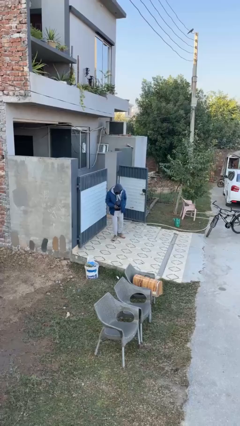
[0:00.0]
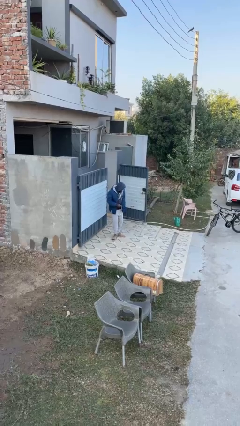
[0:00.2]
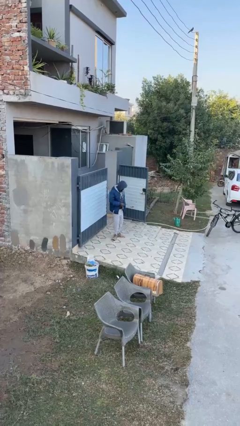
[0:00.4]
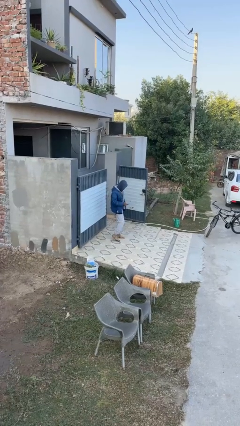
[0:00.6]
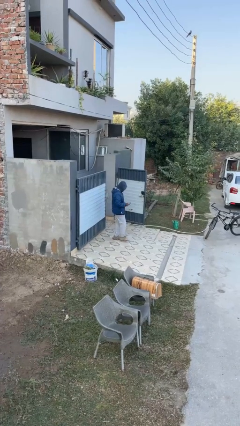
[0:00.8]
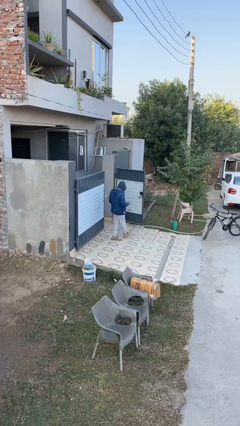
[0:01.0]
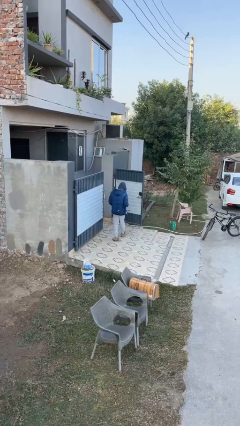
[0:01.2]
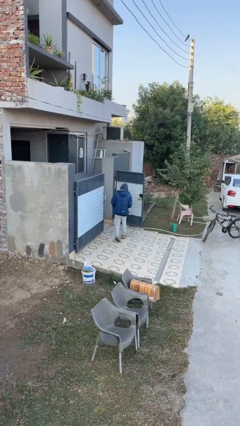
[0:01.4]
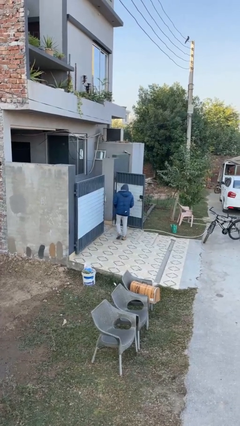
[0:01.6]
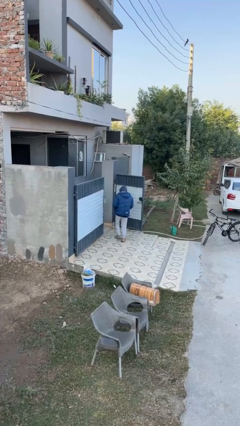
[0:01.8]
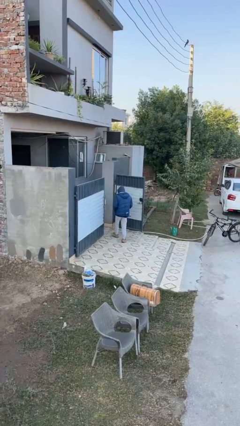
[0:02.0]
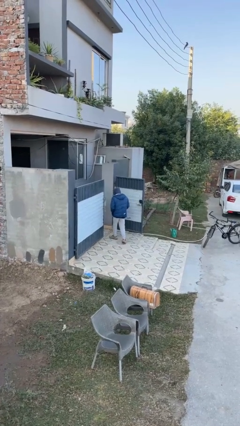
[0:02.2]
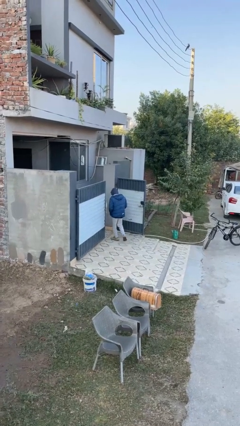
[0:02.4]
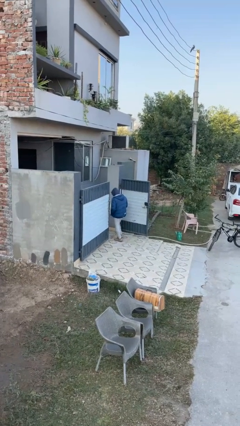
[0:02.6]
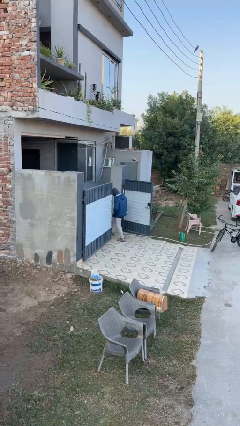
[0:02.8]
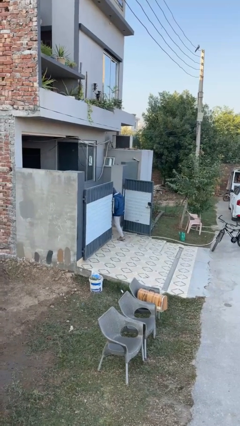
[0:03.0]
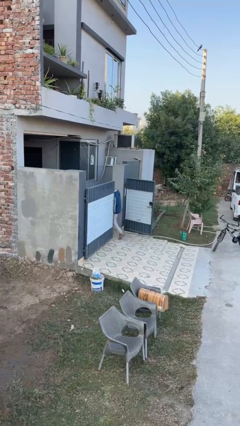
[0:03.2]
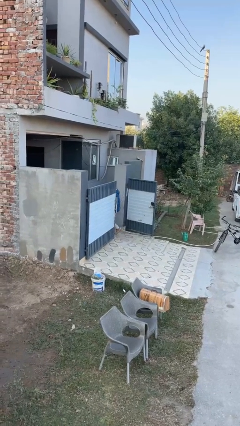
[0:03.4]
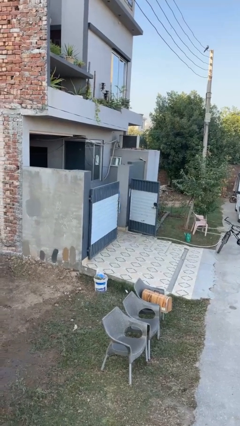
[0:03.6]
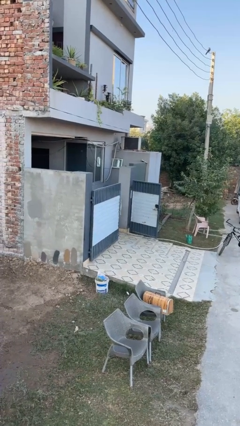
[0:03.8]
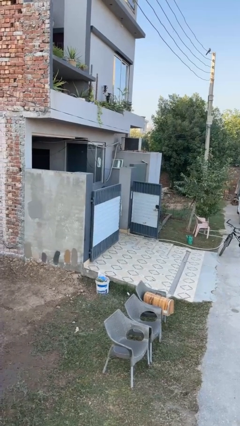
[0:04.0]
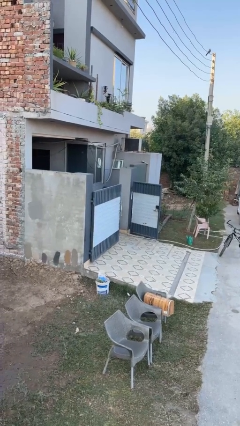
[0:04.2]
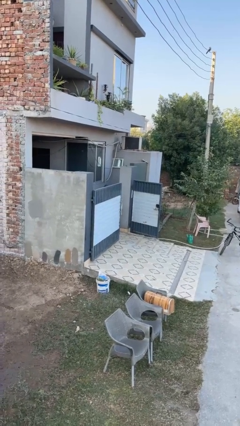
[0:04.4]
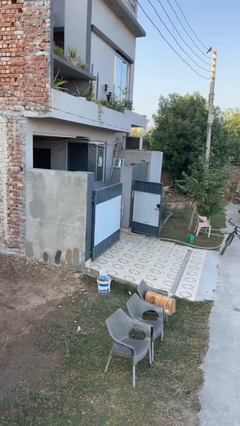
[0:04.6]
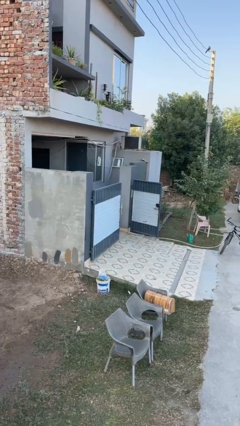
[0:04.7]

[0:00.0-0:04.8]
person exits scene through structure

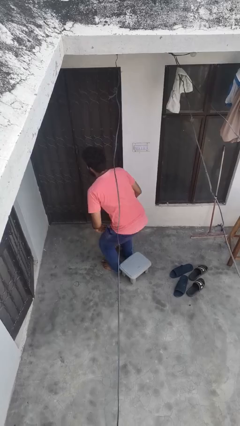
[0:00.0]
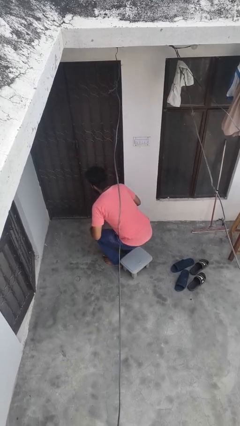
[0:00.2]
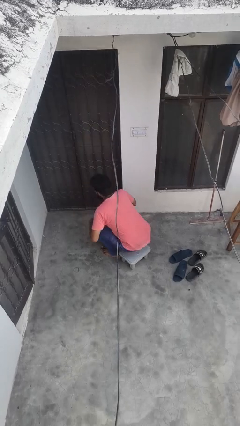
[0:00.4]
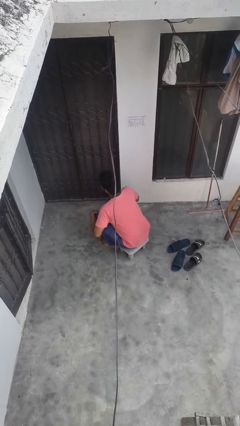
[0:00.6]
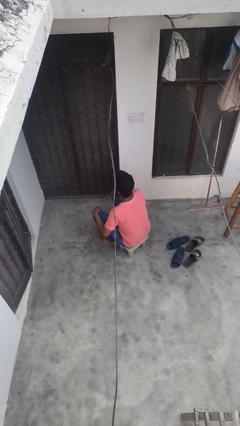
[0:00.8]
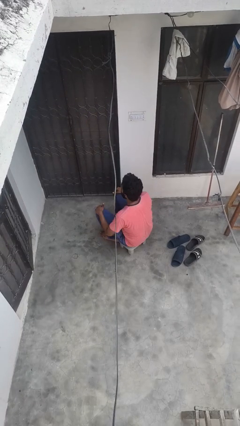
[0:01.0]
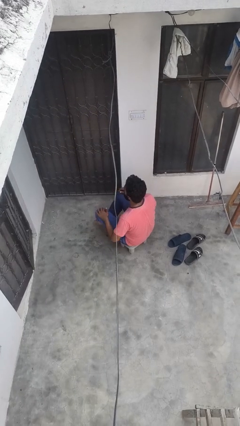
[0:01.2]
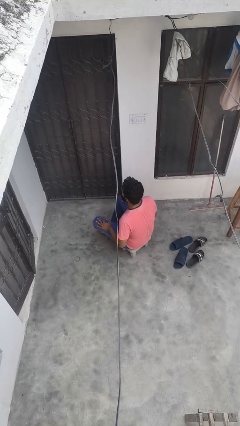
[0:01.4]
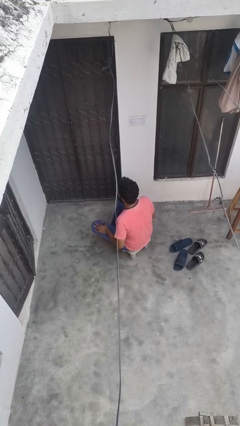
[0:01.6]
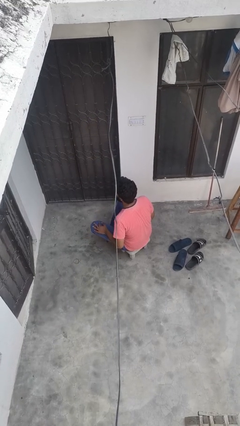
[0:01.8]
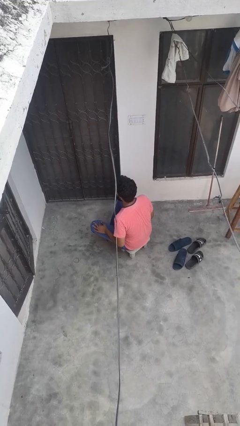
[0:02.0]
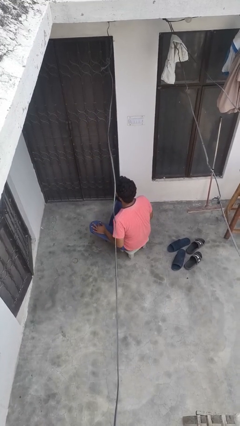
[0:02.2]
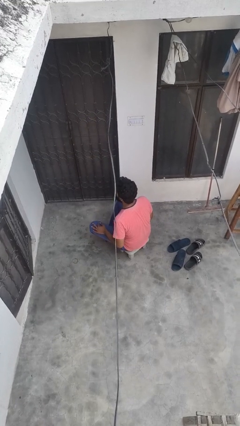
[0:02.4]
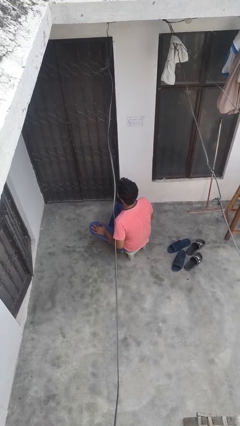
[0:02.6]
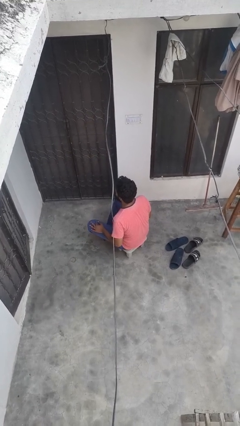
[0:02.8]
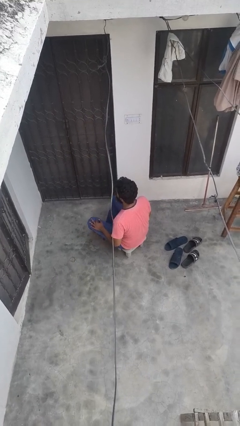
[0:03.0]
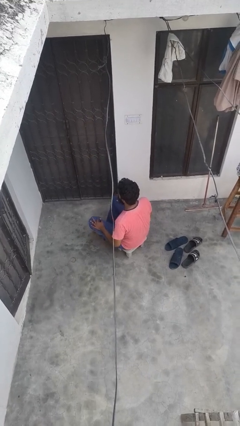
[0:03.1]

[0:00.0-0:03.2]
person sits crisscross

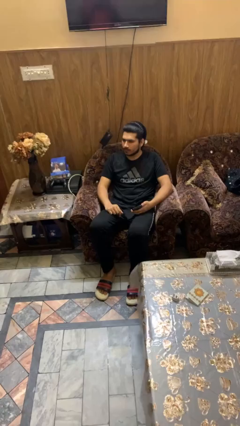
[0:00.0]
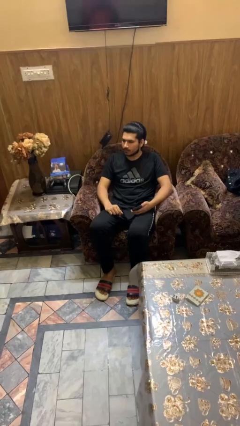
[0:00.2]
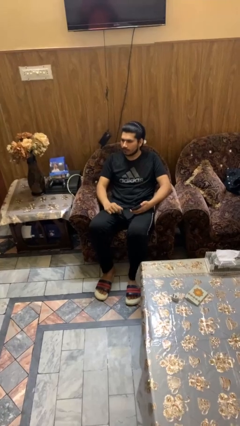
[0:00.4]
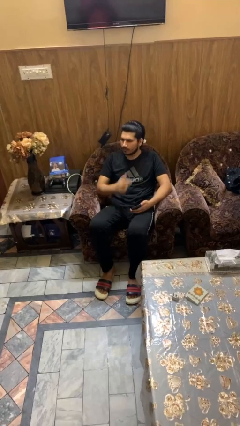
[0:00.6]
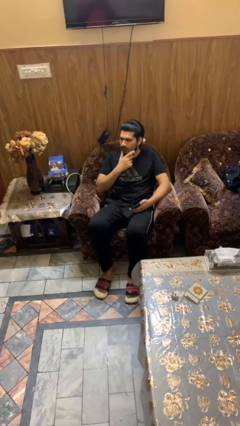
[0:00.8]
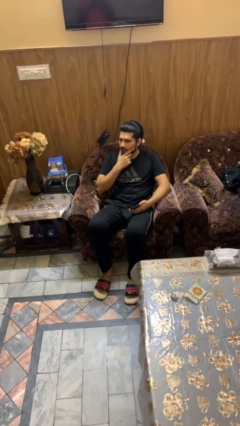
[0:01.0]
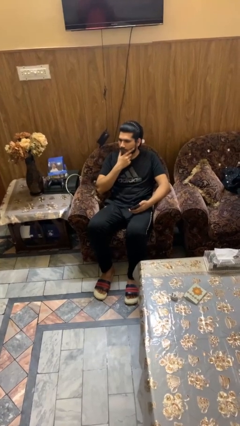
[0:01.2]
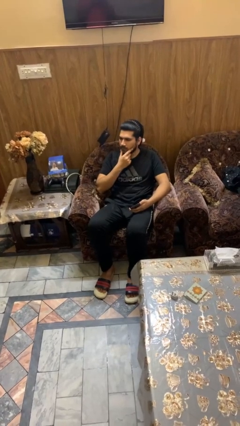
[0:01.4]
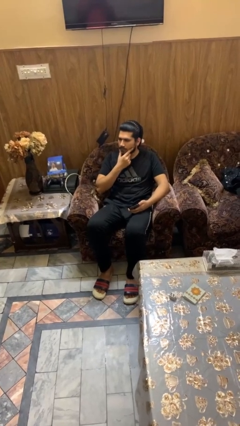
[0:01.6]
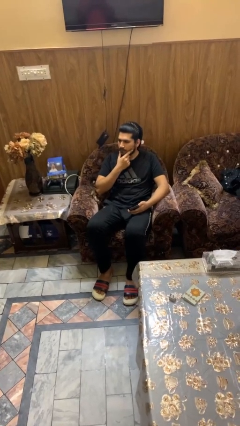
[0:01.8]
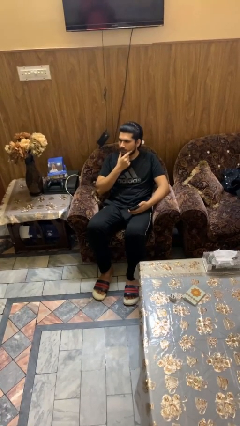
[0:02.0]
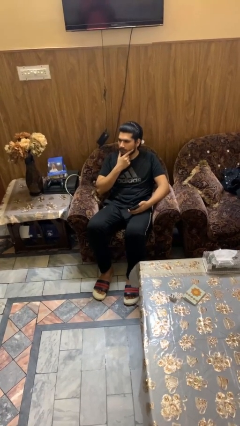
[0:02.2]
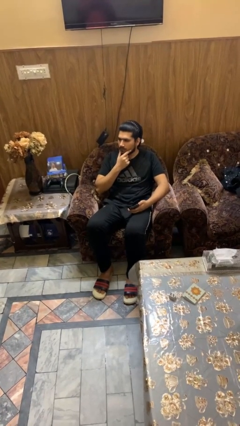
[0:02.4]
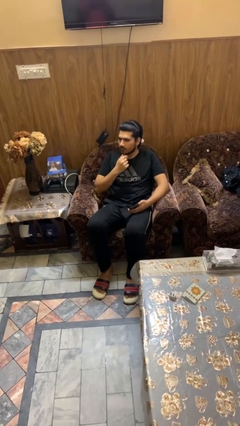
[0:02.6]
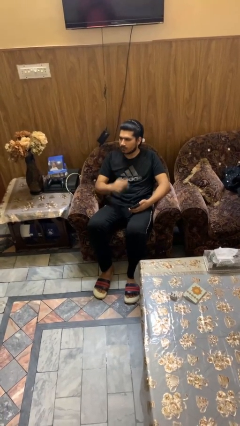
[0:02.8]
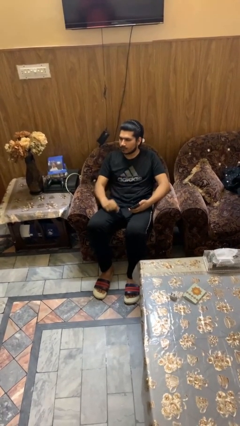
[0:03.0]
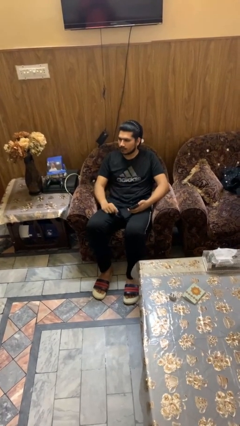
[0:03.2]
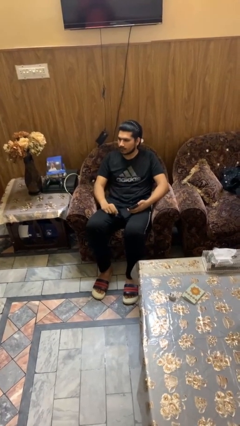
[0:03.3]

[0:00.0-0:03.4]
person strokes chin

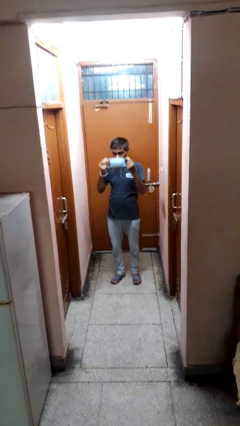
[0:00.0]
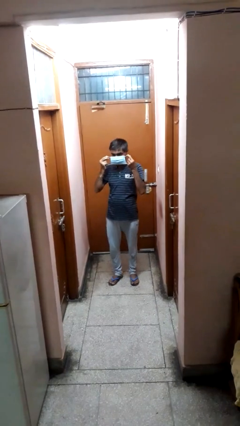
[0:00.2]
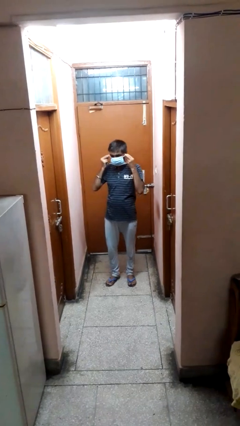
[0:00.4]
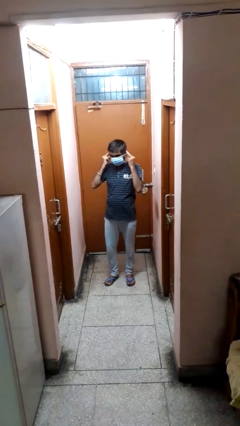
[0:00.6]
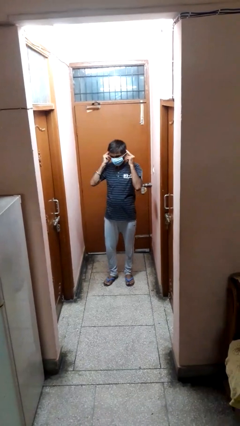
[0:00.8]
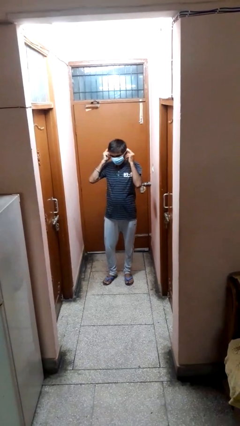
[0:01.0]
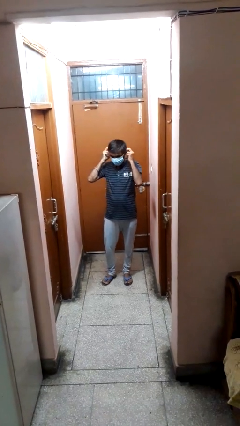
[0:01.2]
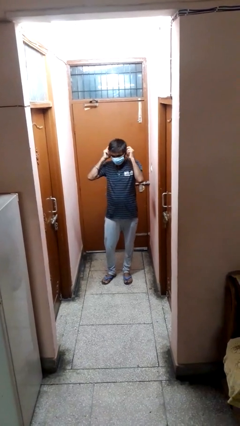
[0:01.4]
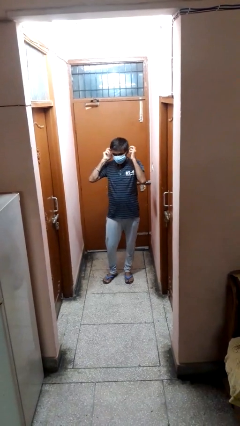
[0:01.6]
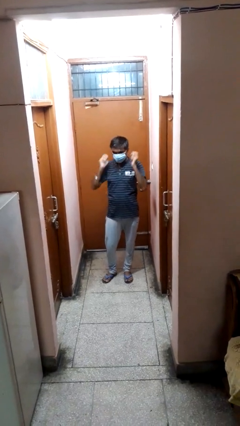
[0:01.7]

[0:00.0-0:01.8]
person puts on facemask

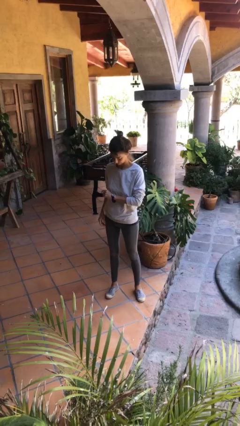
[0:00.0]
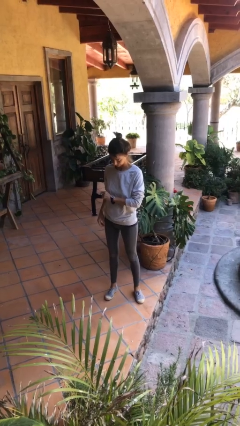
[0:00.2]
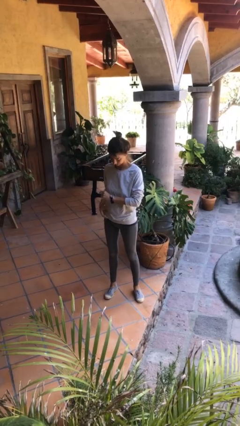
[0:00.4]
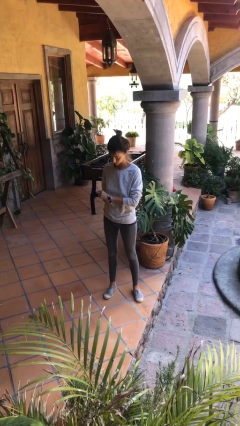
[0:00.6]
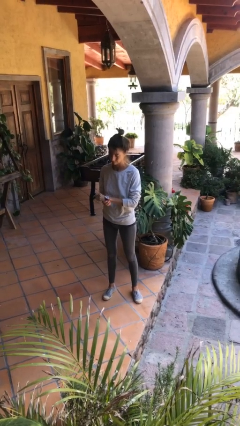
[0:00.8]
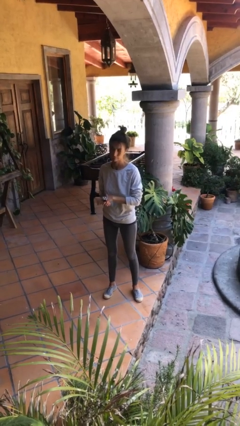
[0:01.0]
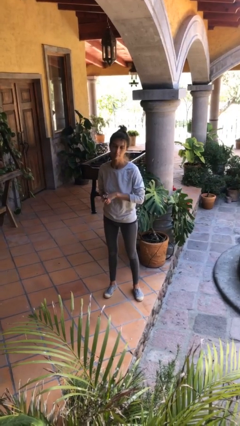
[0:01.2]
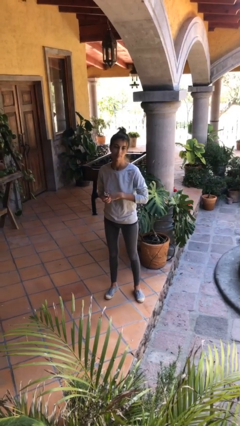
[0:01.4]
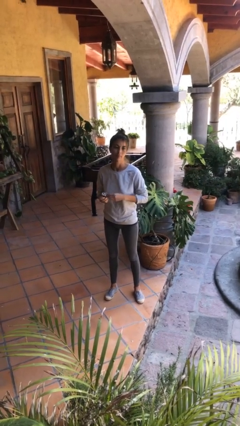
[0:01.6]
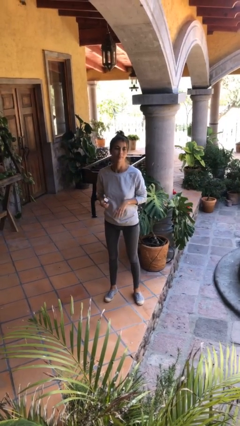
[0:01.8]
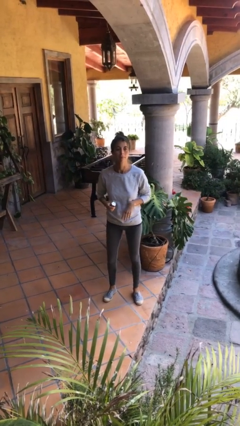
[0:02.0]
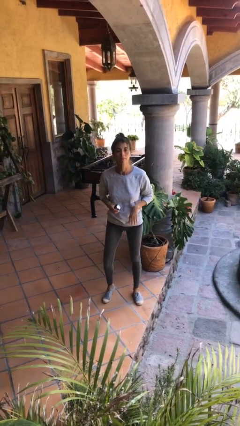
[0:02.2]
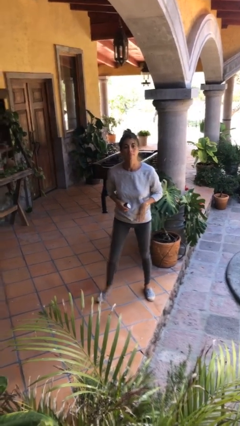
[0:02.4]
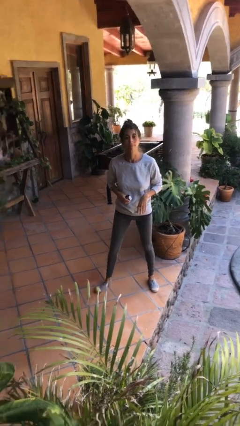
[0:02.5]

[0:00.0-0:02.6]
person takes off wristwatch

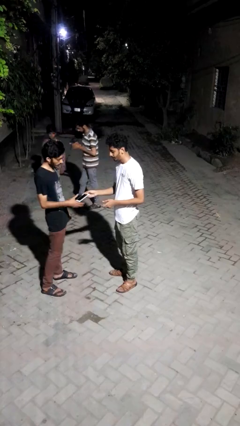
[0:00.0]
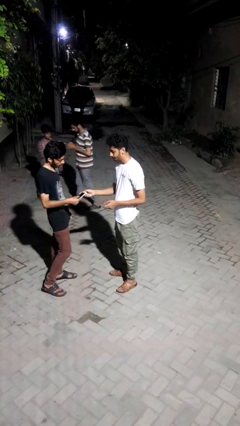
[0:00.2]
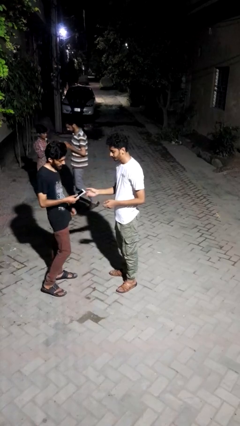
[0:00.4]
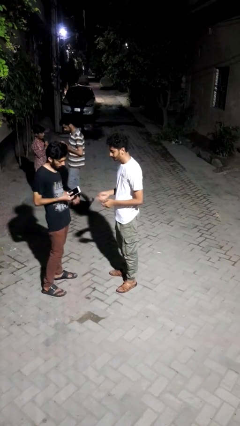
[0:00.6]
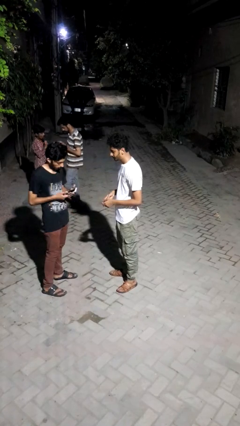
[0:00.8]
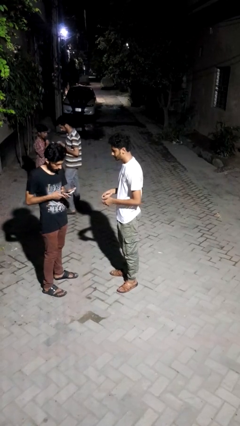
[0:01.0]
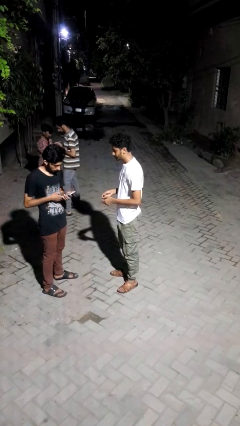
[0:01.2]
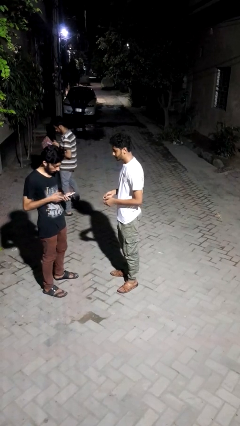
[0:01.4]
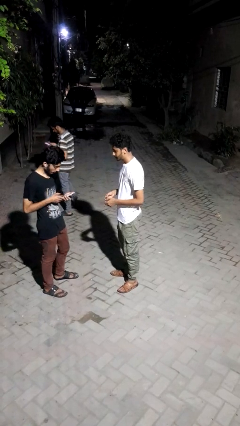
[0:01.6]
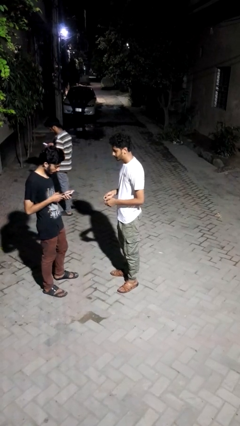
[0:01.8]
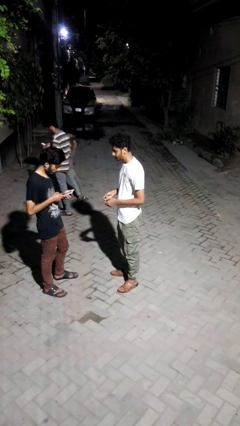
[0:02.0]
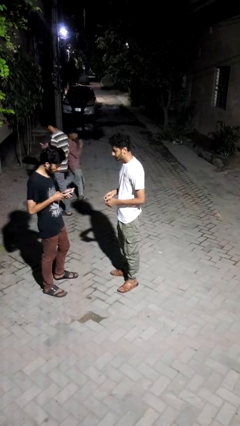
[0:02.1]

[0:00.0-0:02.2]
person transfers object to person
